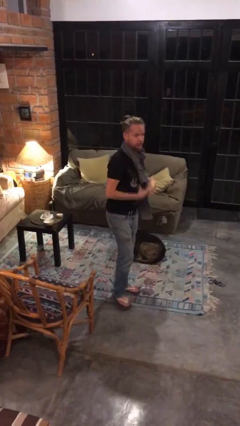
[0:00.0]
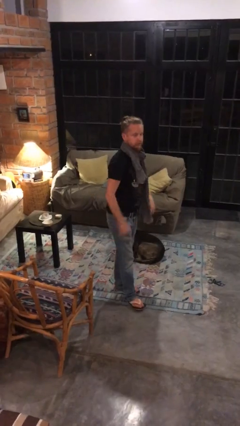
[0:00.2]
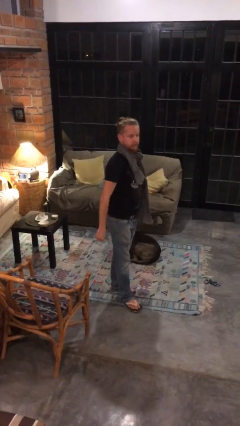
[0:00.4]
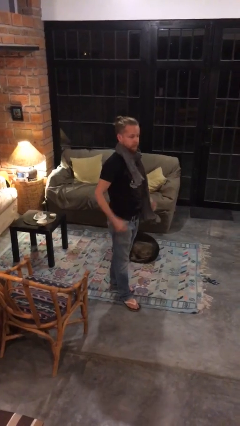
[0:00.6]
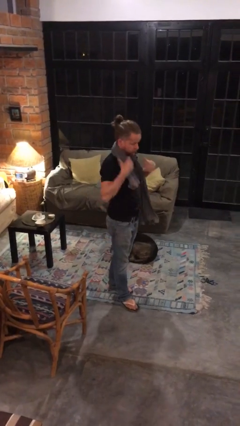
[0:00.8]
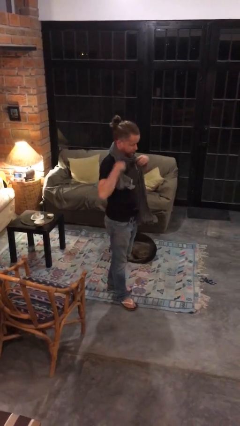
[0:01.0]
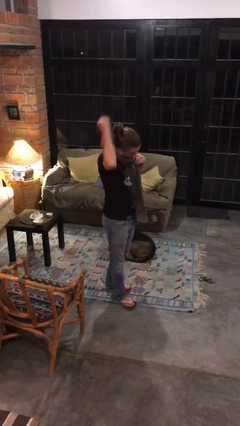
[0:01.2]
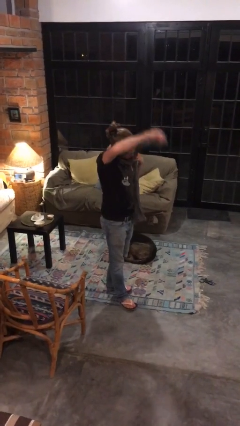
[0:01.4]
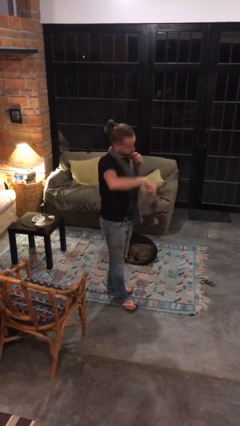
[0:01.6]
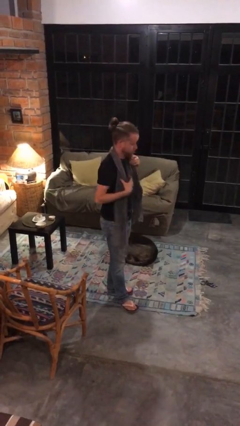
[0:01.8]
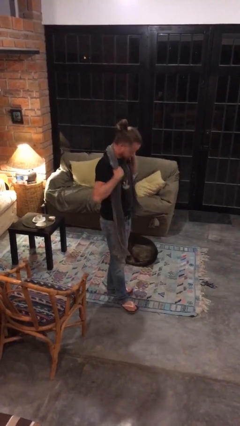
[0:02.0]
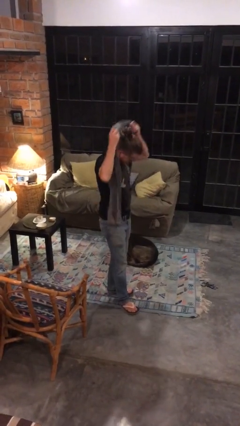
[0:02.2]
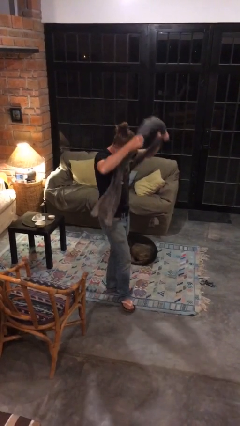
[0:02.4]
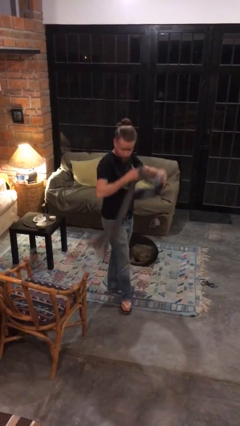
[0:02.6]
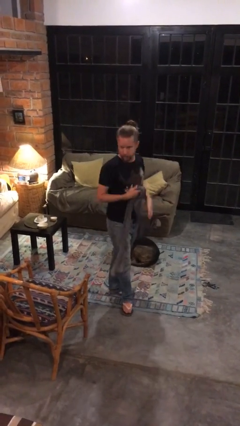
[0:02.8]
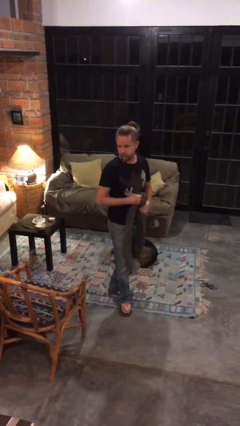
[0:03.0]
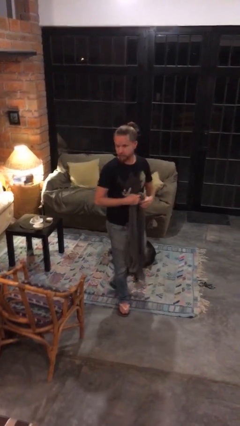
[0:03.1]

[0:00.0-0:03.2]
person takes off scarf

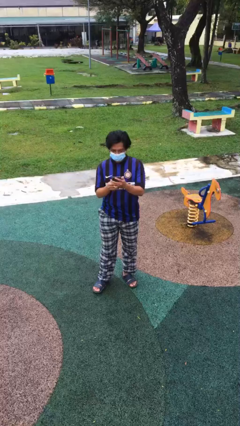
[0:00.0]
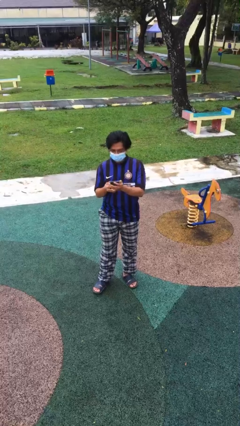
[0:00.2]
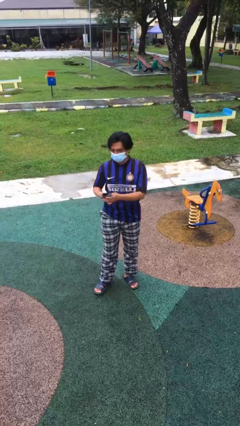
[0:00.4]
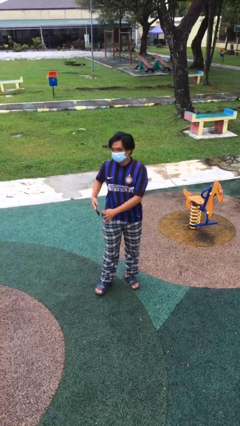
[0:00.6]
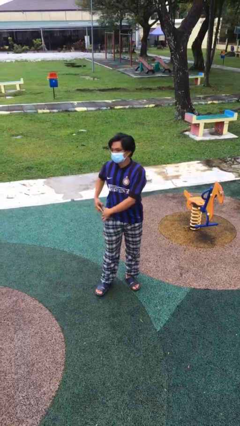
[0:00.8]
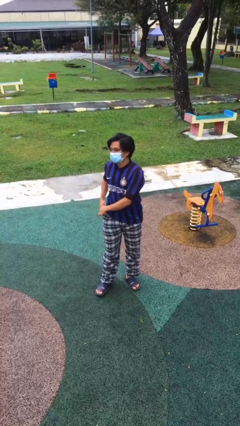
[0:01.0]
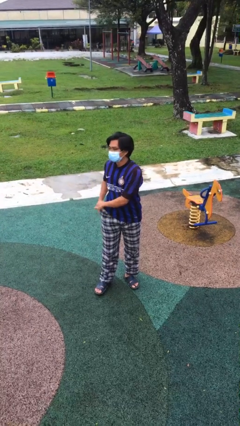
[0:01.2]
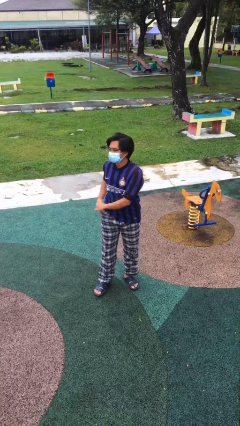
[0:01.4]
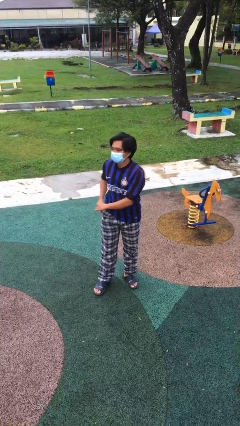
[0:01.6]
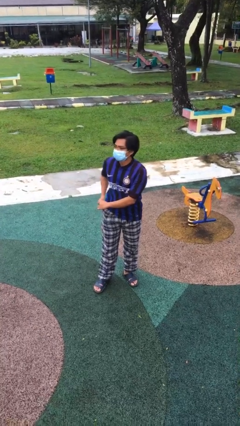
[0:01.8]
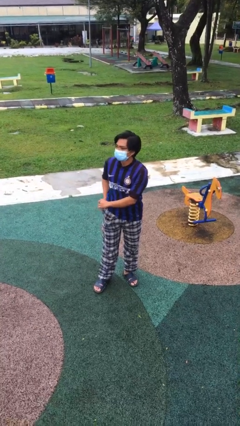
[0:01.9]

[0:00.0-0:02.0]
person puts phone into pocket

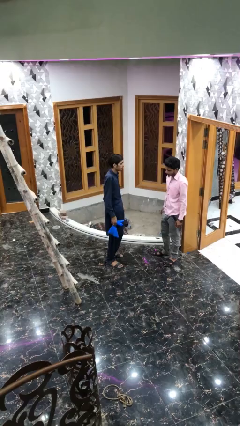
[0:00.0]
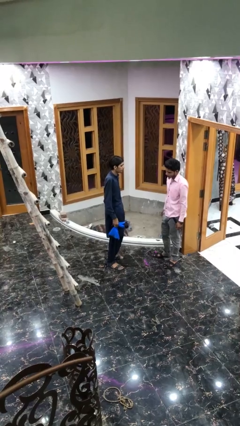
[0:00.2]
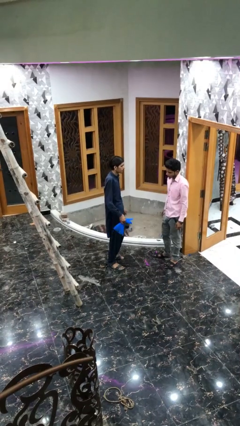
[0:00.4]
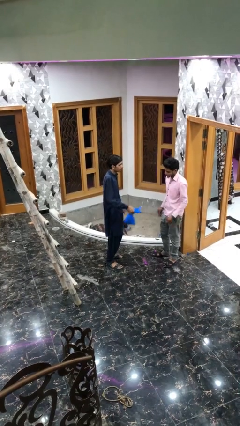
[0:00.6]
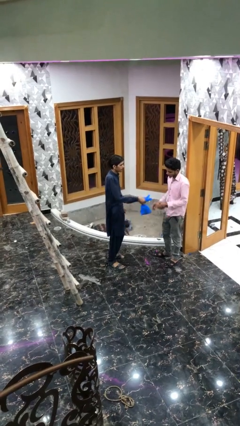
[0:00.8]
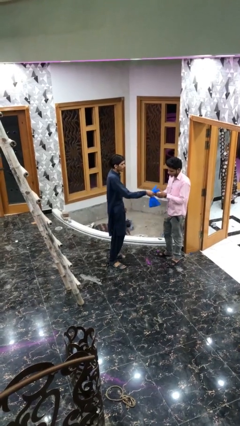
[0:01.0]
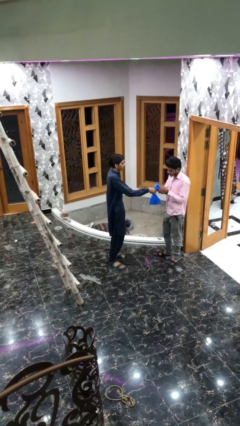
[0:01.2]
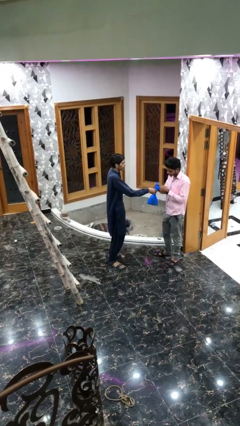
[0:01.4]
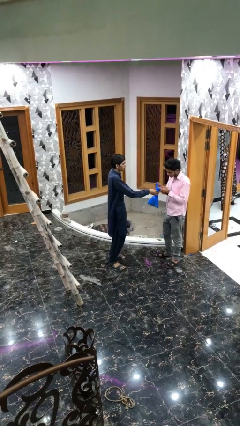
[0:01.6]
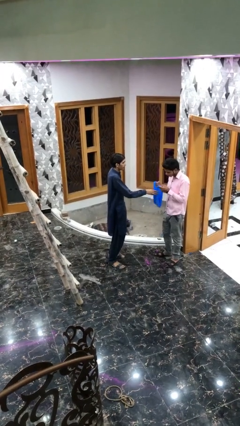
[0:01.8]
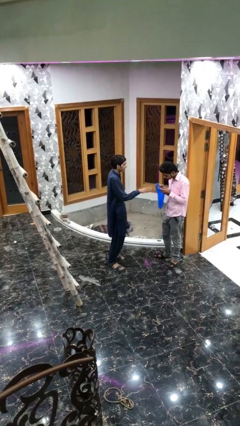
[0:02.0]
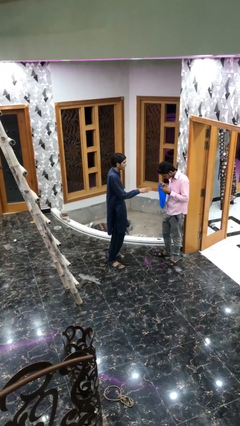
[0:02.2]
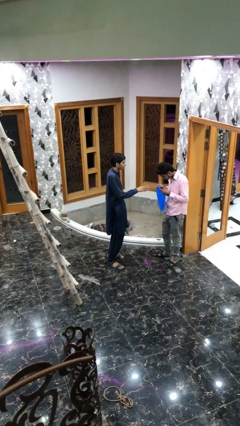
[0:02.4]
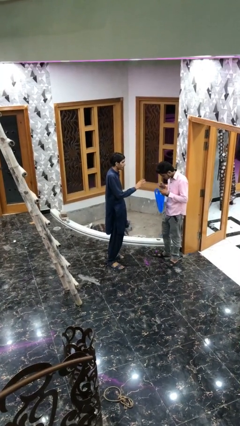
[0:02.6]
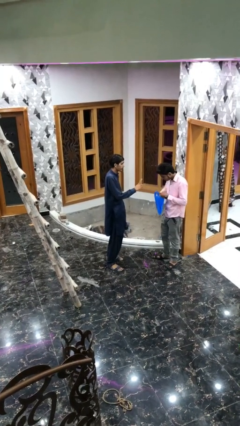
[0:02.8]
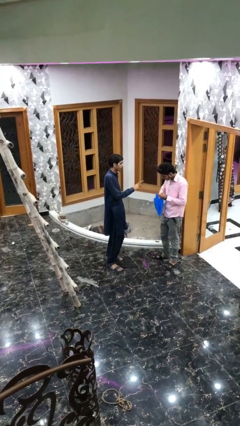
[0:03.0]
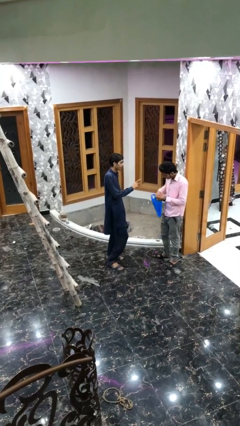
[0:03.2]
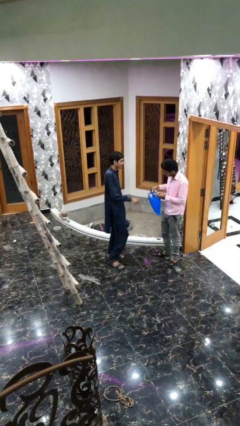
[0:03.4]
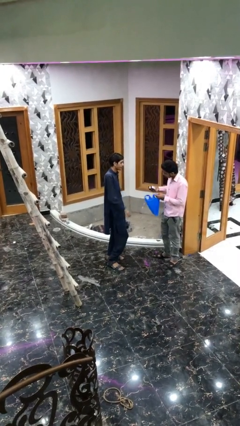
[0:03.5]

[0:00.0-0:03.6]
person transfers object to person

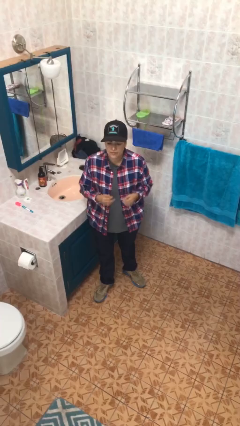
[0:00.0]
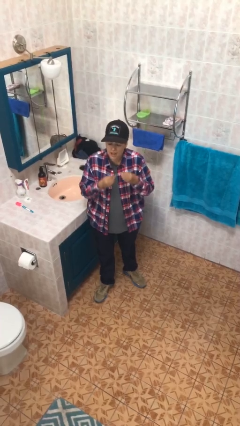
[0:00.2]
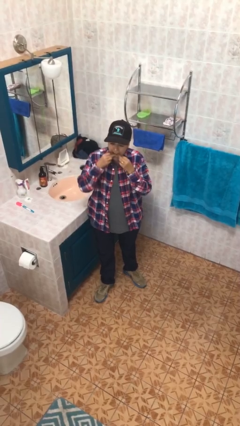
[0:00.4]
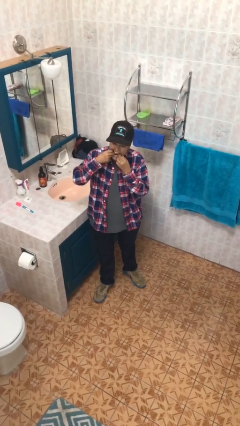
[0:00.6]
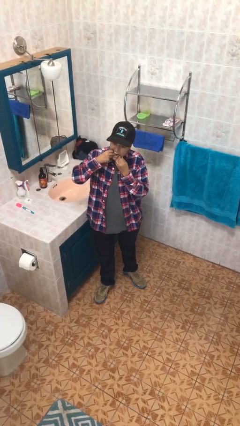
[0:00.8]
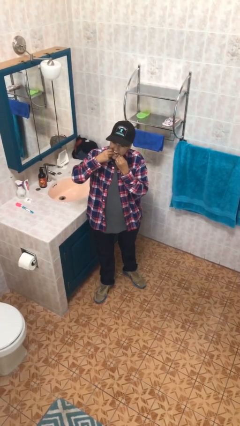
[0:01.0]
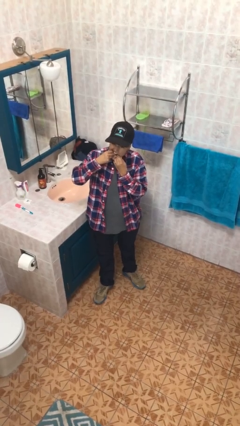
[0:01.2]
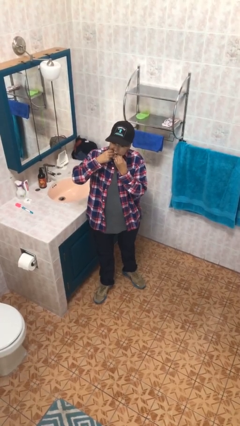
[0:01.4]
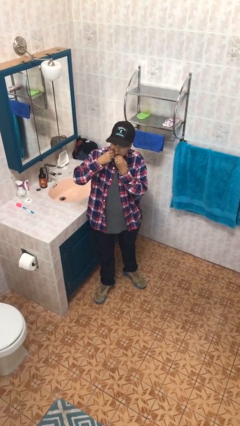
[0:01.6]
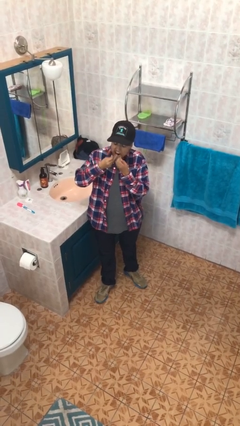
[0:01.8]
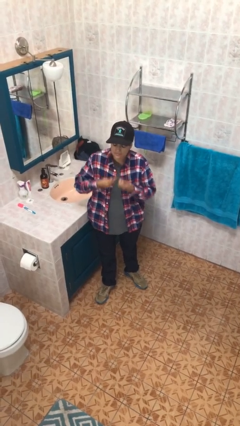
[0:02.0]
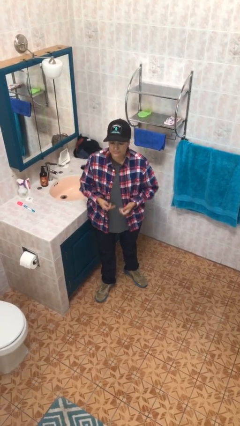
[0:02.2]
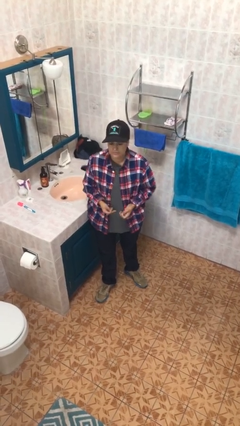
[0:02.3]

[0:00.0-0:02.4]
person flosses

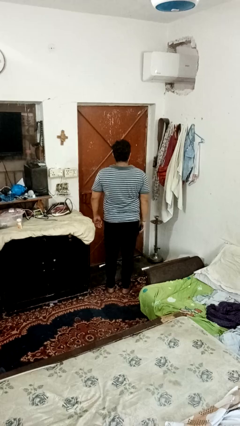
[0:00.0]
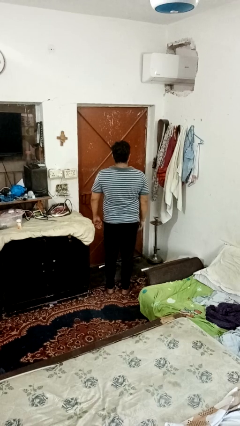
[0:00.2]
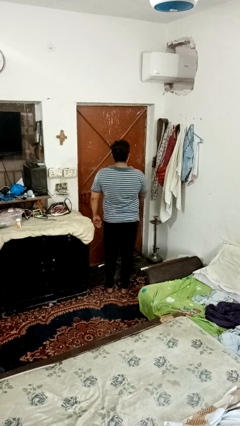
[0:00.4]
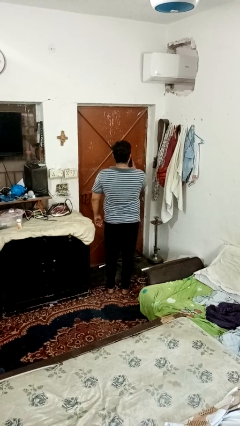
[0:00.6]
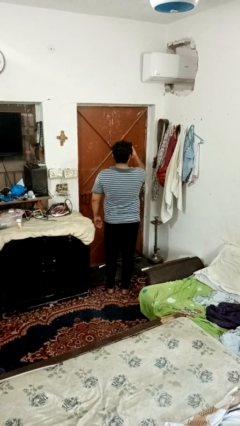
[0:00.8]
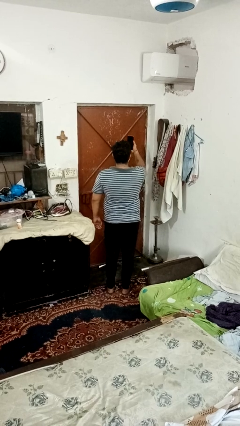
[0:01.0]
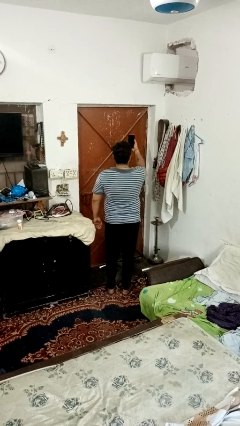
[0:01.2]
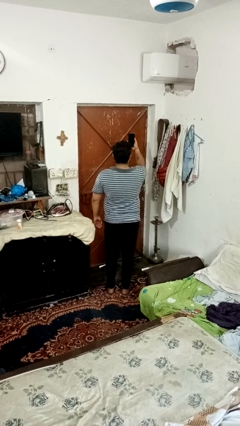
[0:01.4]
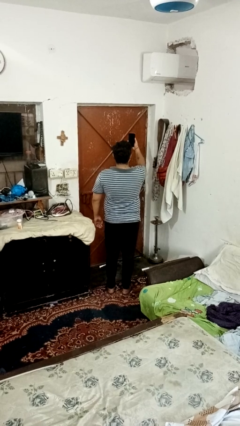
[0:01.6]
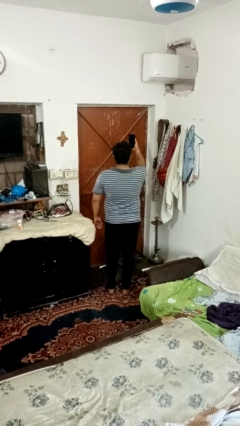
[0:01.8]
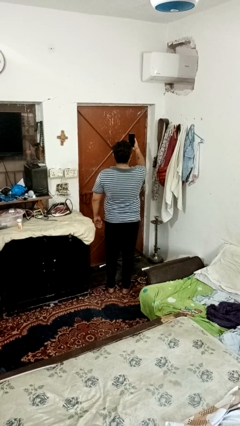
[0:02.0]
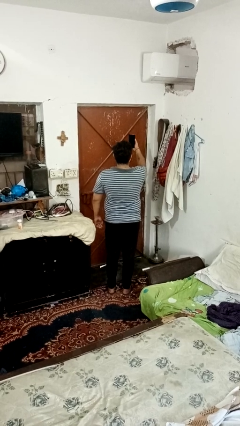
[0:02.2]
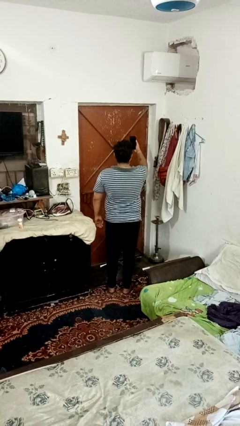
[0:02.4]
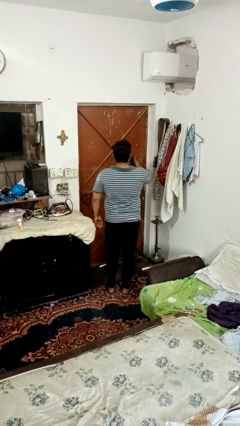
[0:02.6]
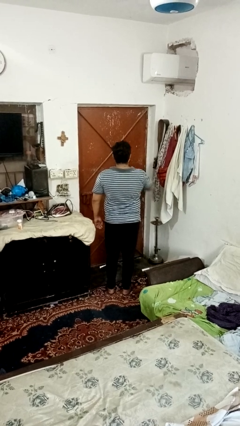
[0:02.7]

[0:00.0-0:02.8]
person takes selfie

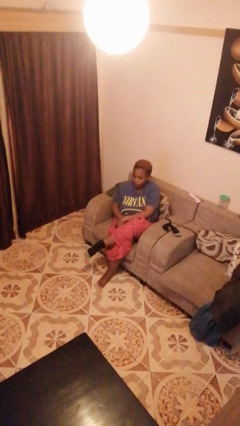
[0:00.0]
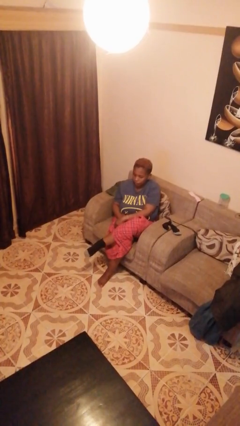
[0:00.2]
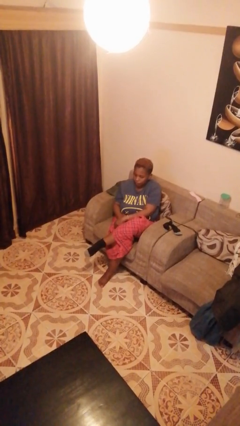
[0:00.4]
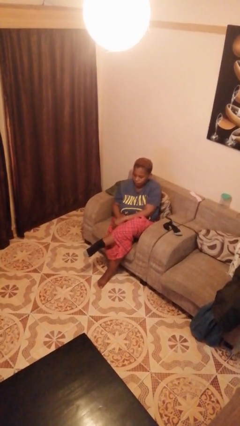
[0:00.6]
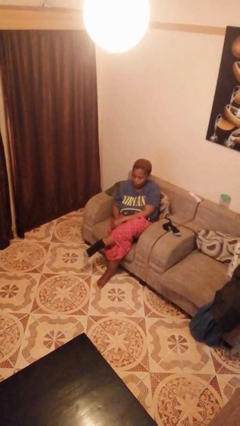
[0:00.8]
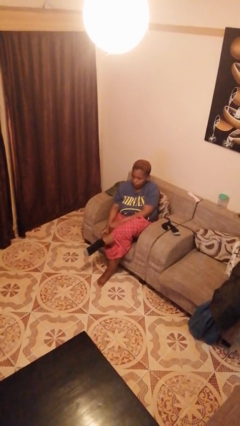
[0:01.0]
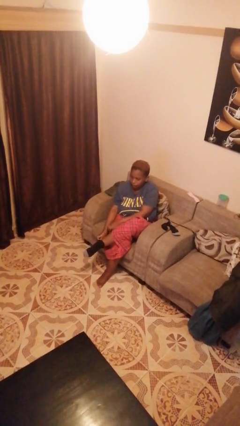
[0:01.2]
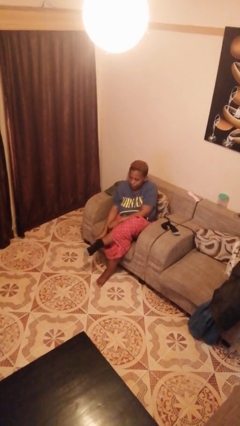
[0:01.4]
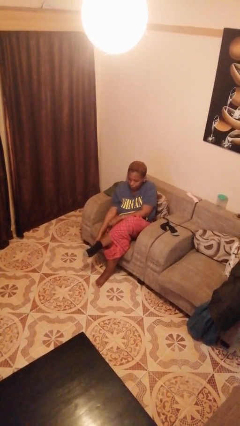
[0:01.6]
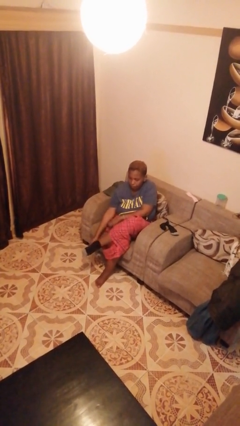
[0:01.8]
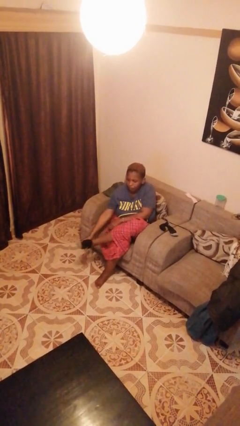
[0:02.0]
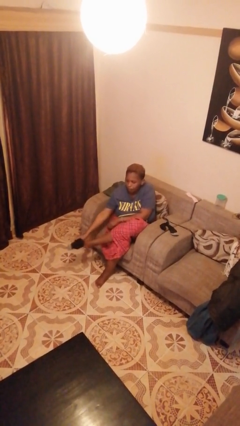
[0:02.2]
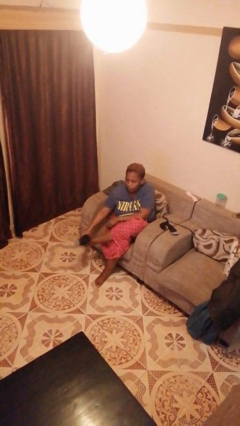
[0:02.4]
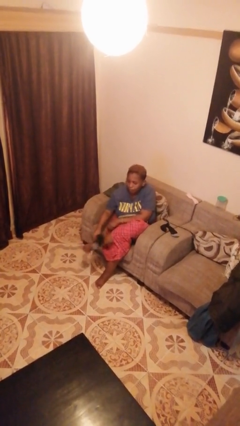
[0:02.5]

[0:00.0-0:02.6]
person takes off socks

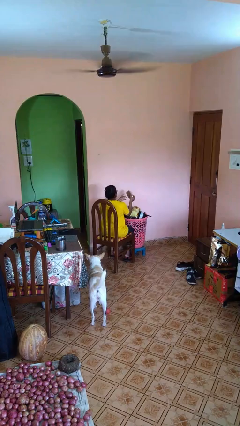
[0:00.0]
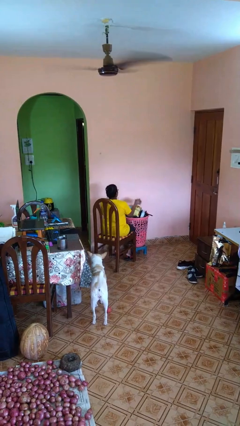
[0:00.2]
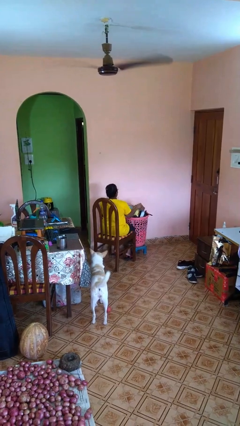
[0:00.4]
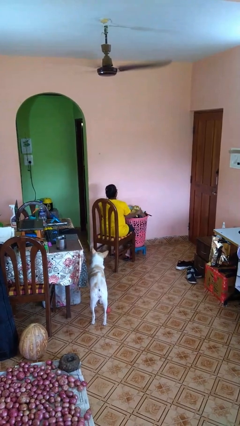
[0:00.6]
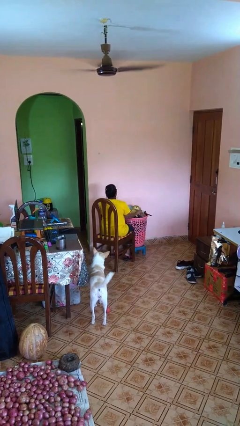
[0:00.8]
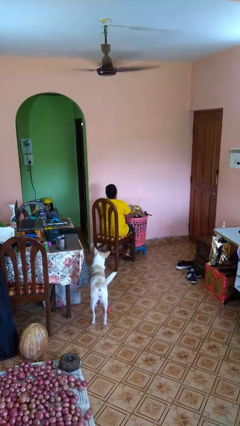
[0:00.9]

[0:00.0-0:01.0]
person puts object into basket
